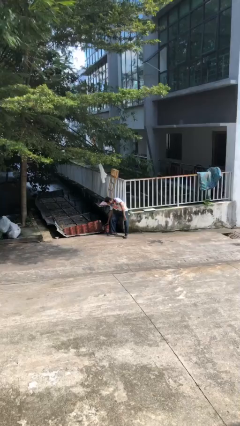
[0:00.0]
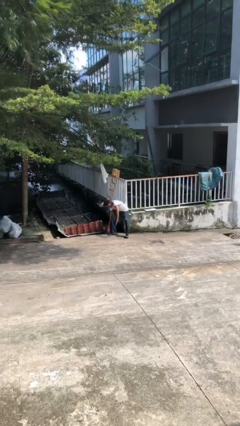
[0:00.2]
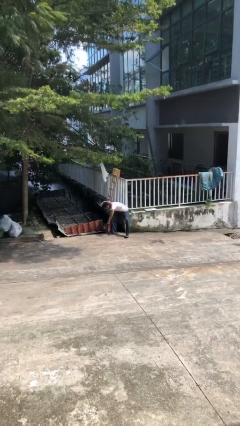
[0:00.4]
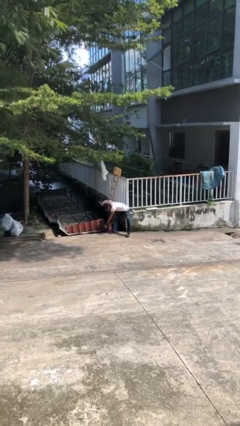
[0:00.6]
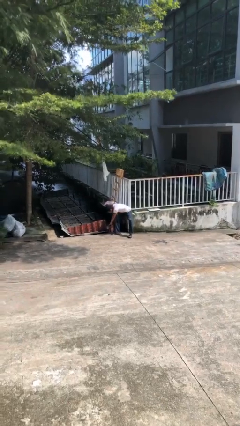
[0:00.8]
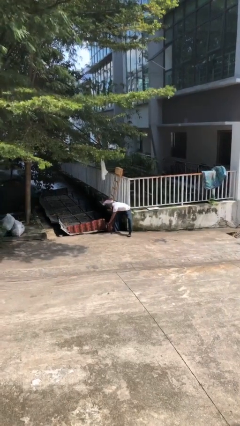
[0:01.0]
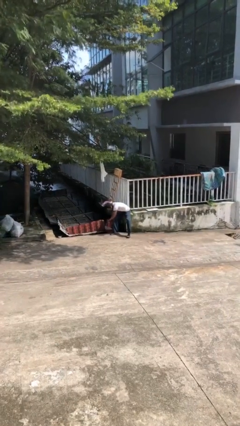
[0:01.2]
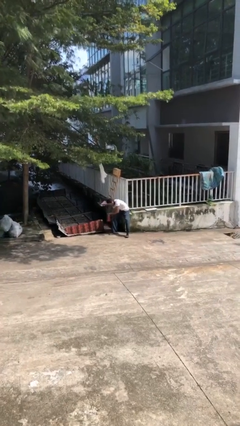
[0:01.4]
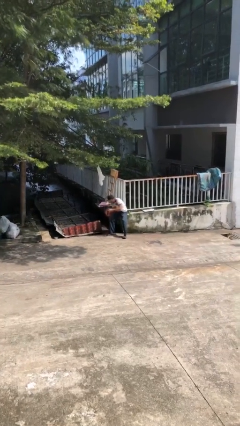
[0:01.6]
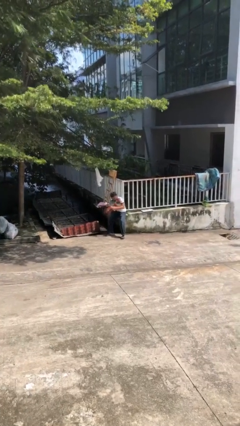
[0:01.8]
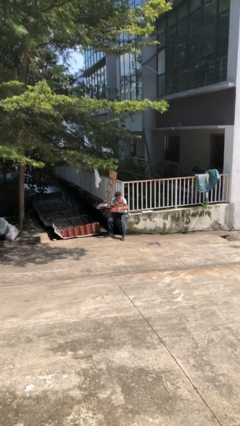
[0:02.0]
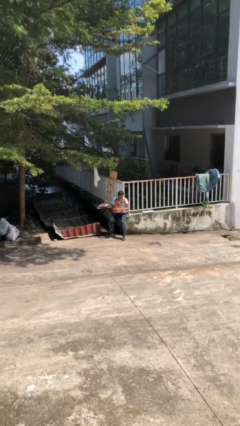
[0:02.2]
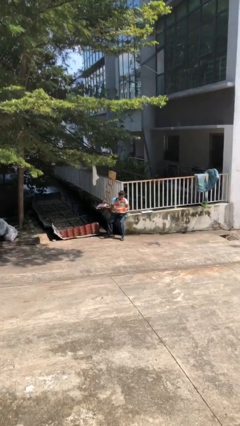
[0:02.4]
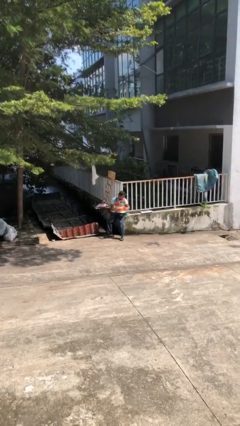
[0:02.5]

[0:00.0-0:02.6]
person picks up object from floor

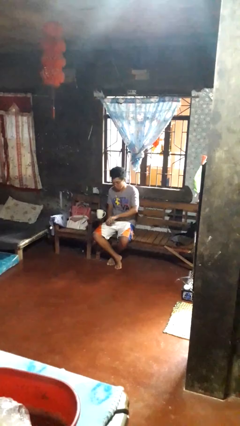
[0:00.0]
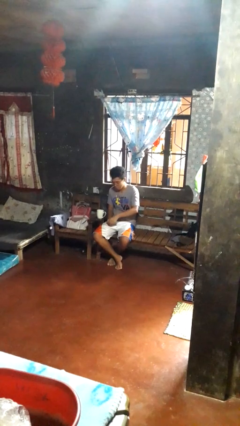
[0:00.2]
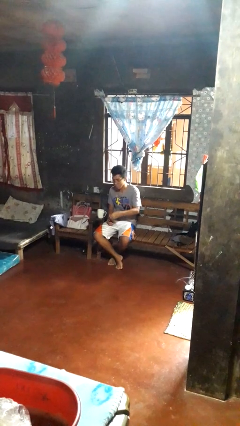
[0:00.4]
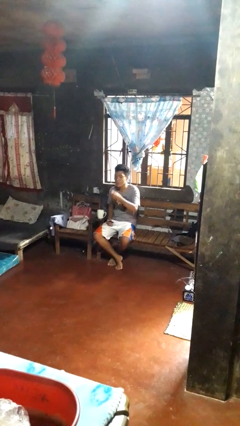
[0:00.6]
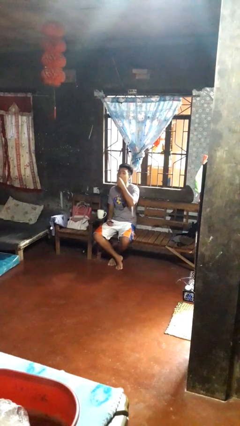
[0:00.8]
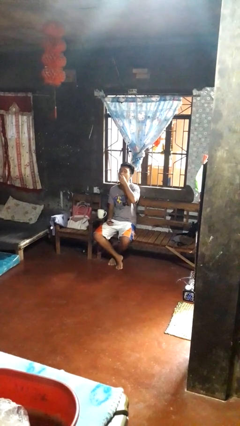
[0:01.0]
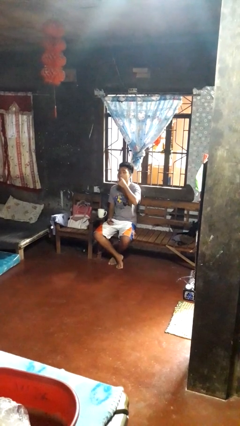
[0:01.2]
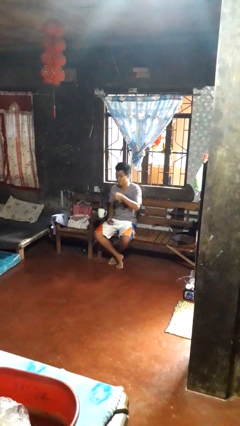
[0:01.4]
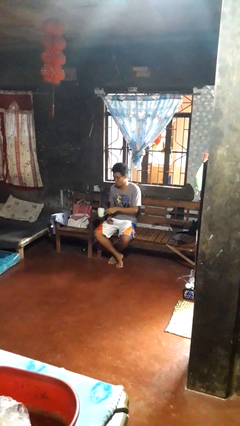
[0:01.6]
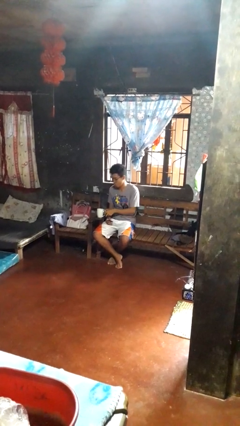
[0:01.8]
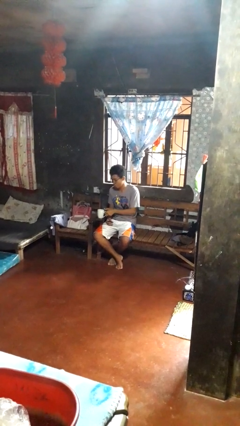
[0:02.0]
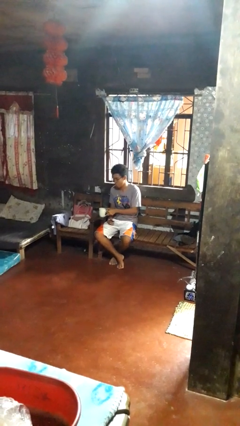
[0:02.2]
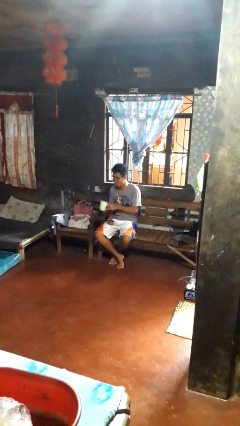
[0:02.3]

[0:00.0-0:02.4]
person takes medicine pills

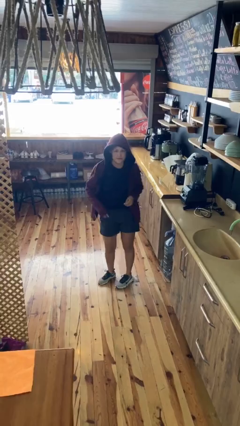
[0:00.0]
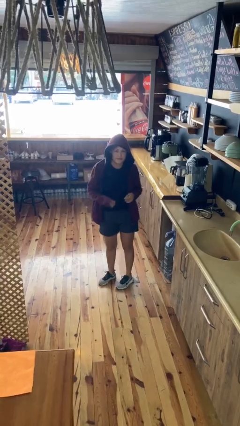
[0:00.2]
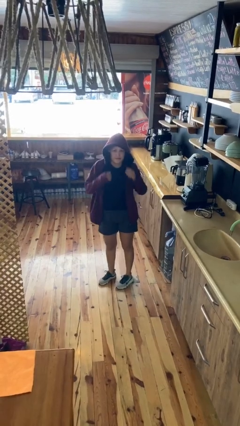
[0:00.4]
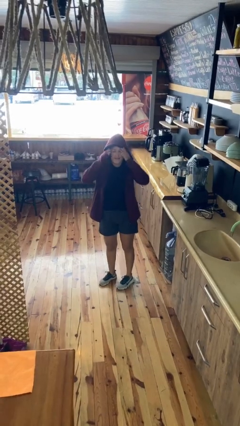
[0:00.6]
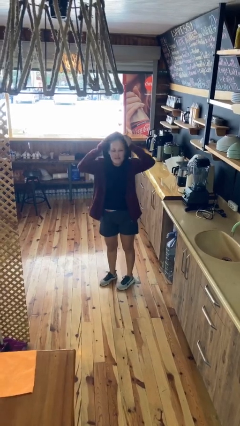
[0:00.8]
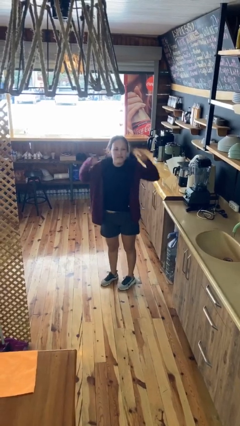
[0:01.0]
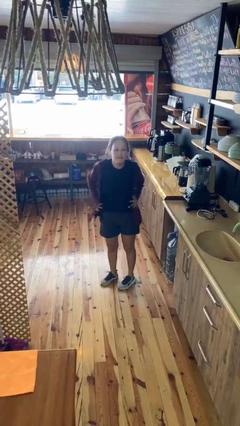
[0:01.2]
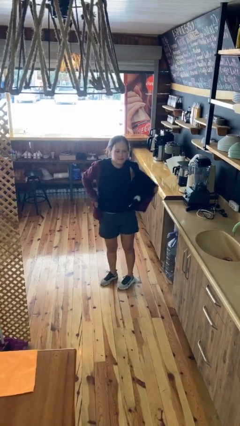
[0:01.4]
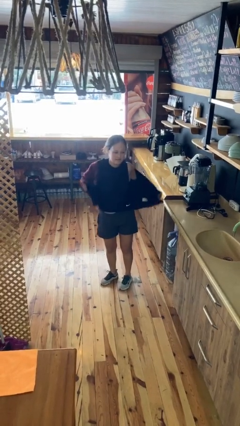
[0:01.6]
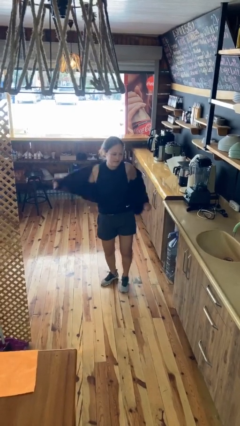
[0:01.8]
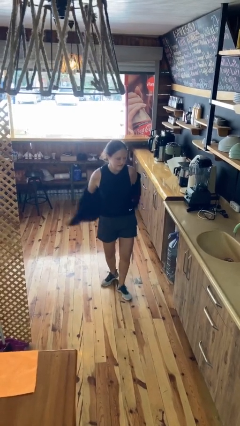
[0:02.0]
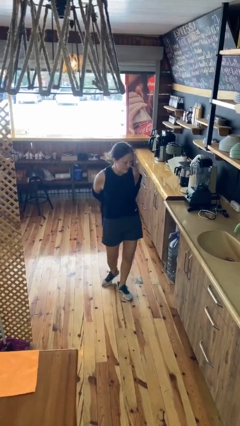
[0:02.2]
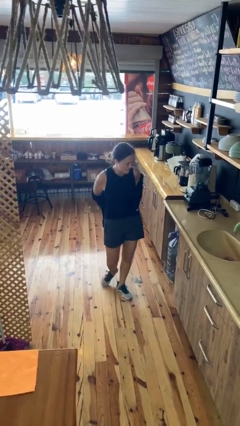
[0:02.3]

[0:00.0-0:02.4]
person takes off hoodie

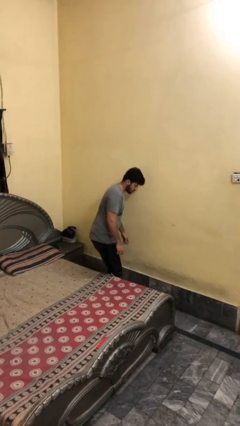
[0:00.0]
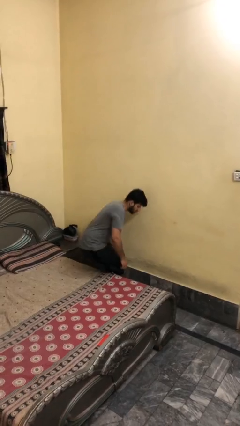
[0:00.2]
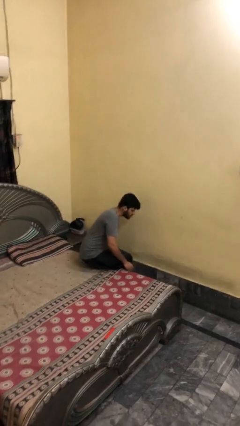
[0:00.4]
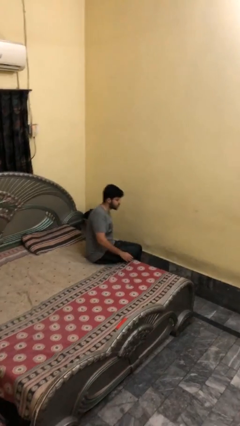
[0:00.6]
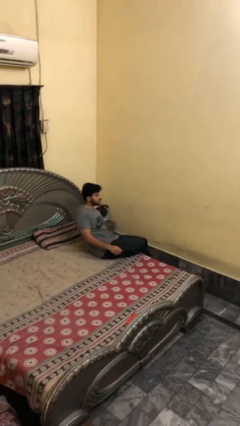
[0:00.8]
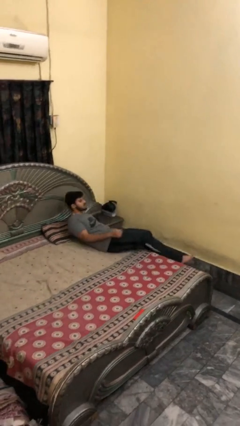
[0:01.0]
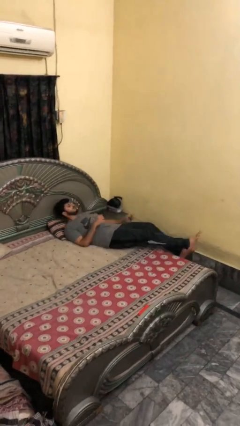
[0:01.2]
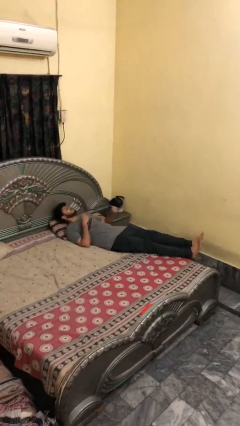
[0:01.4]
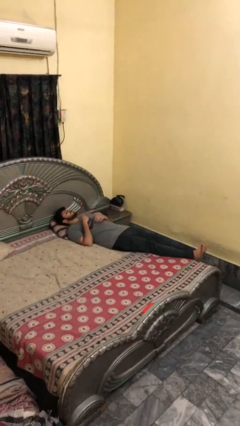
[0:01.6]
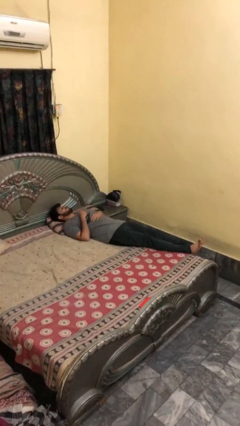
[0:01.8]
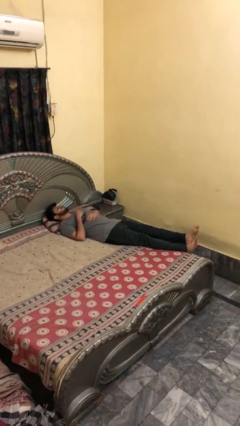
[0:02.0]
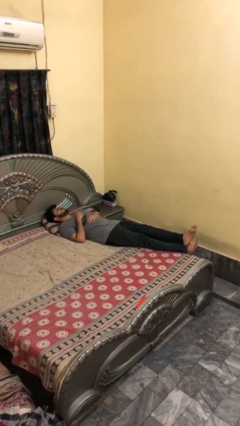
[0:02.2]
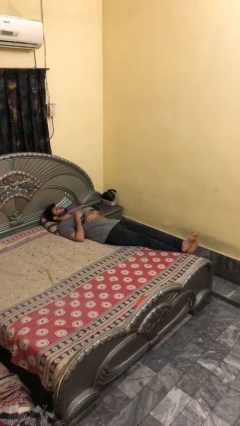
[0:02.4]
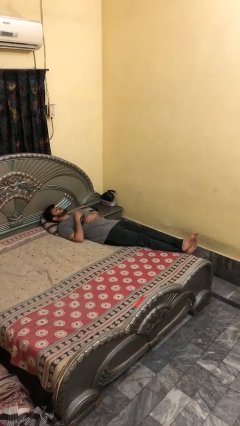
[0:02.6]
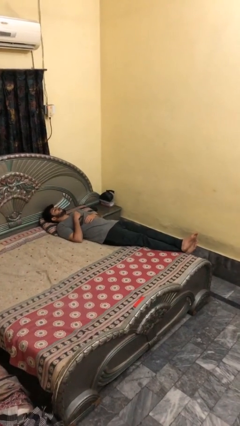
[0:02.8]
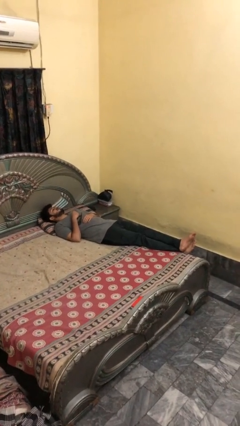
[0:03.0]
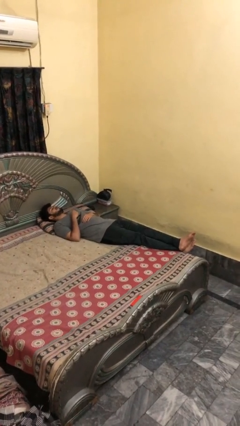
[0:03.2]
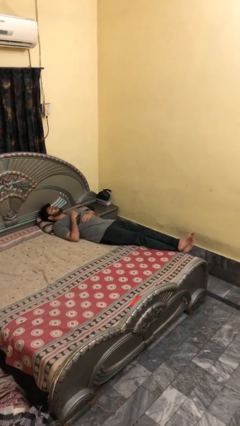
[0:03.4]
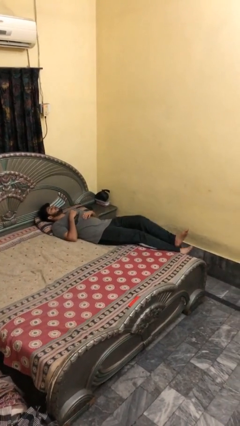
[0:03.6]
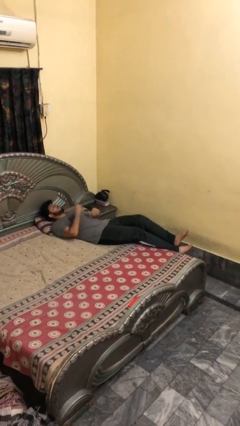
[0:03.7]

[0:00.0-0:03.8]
person lies down on bed

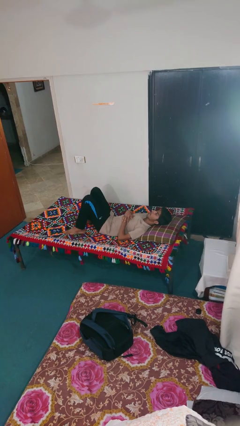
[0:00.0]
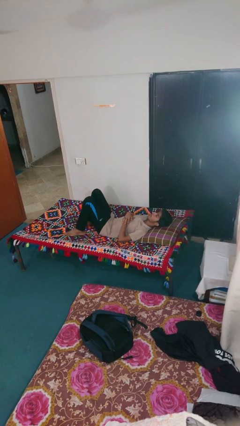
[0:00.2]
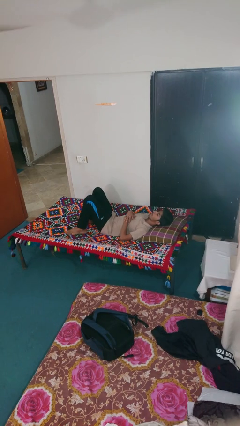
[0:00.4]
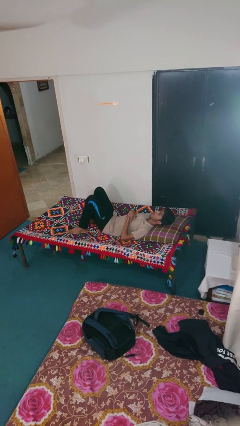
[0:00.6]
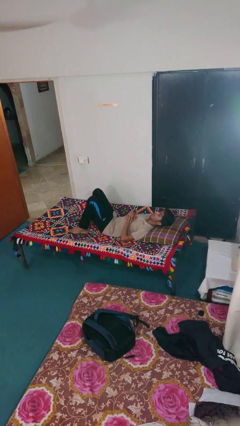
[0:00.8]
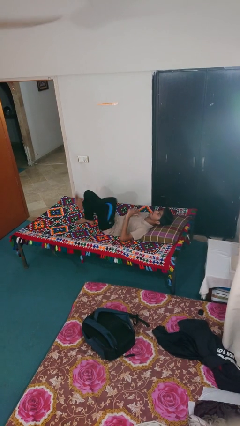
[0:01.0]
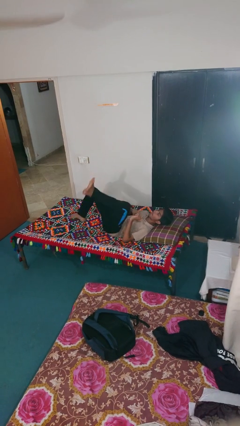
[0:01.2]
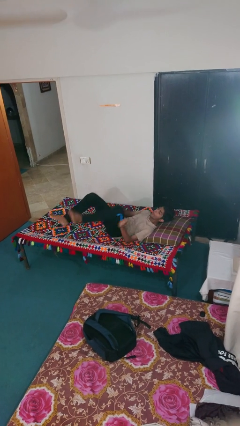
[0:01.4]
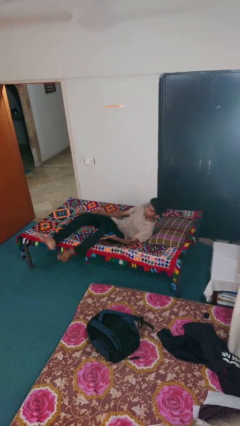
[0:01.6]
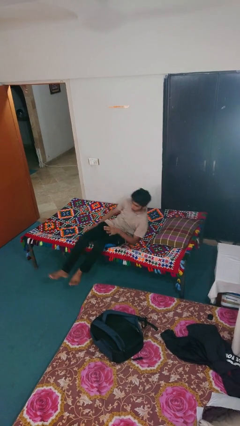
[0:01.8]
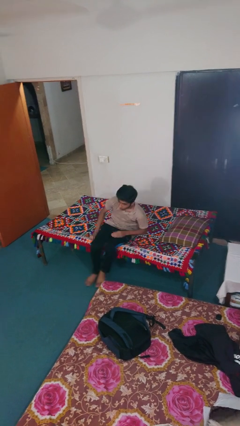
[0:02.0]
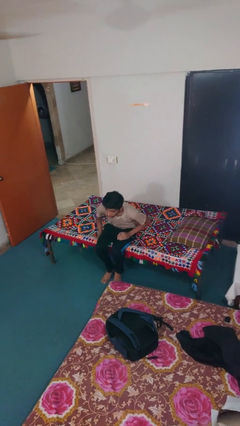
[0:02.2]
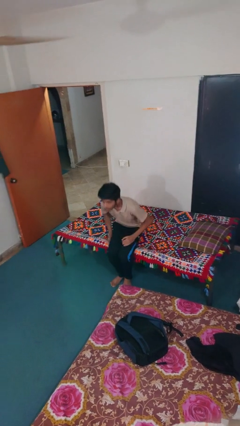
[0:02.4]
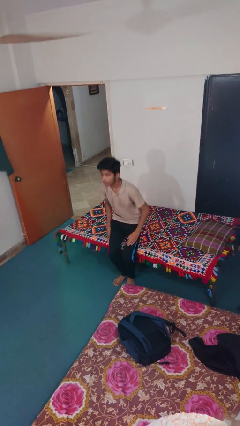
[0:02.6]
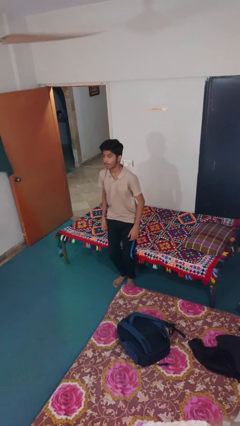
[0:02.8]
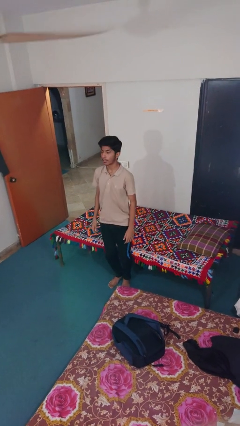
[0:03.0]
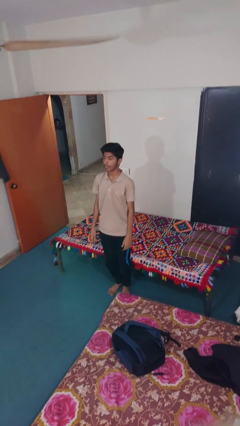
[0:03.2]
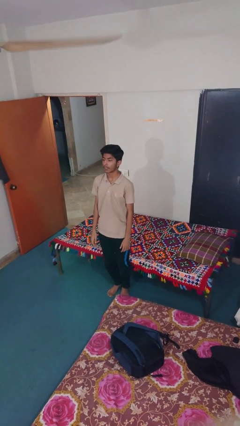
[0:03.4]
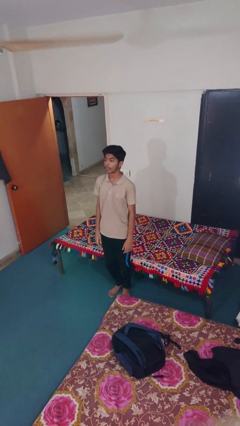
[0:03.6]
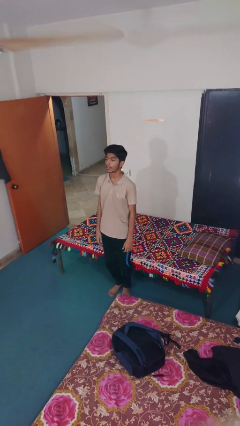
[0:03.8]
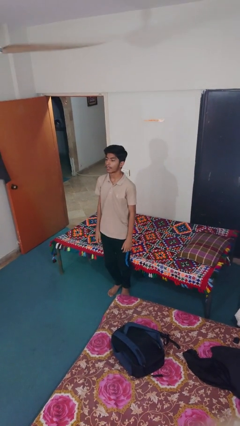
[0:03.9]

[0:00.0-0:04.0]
person stands up

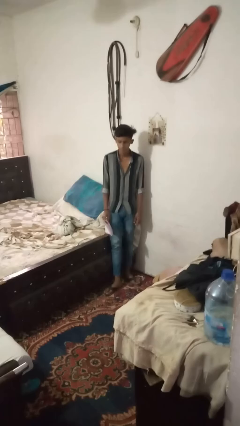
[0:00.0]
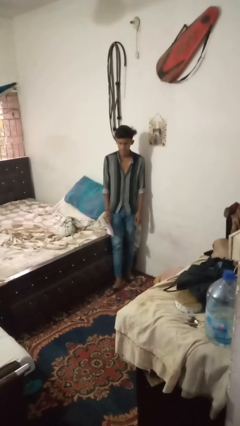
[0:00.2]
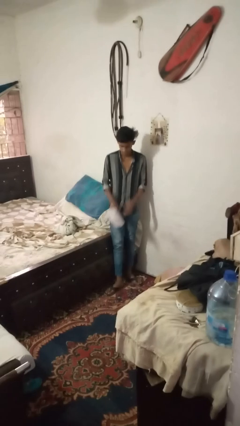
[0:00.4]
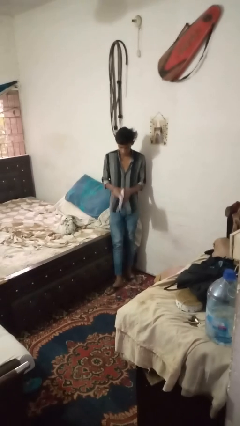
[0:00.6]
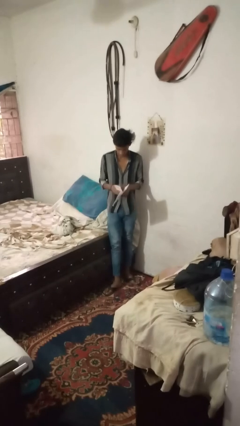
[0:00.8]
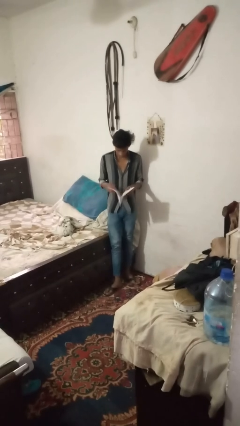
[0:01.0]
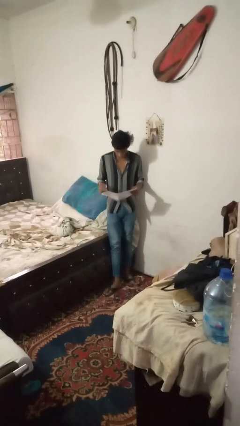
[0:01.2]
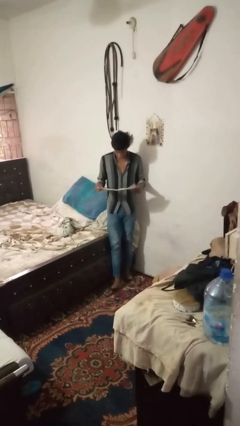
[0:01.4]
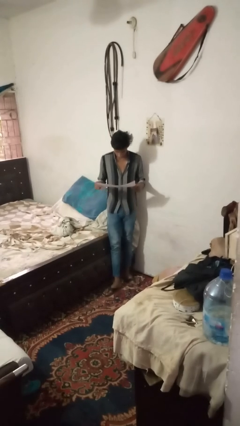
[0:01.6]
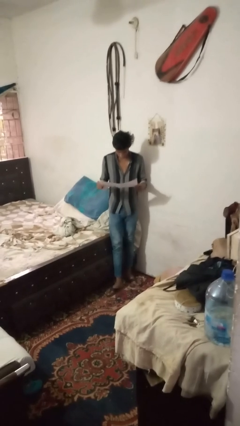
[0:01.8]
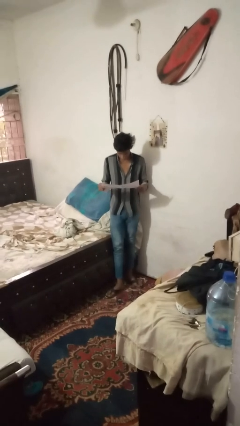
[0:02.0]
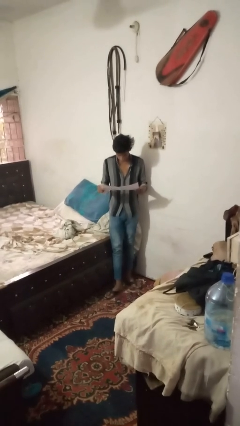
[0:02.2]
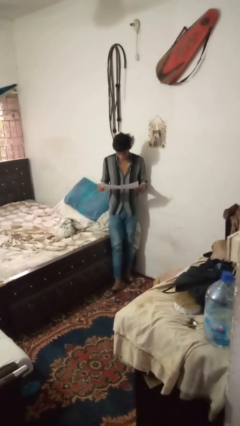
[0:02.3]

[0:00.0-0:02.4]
person reads newspaper
